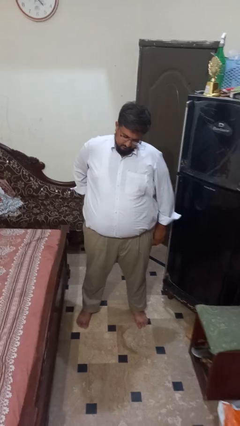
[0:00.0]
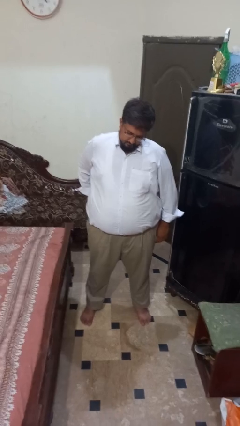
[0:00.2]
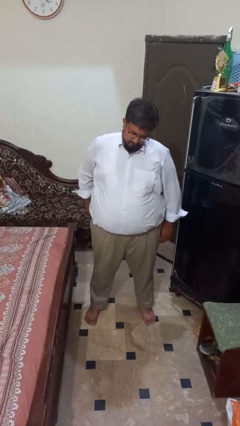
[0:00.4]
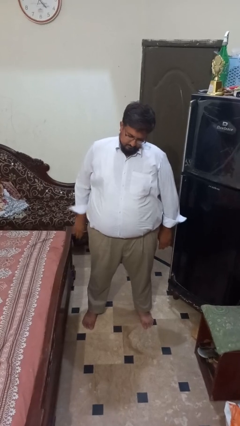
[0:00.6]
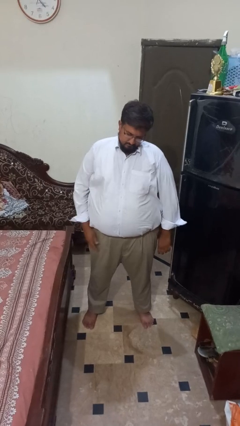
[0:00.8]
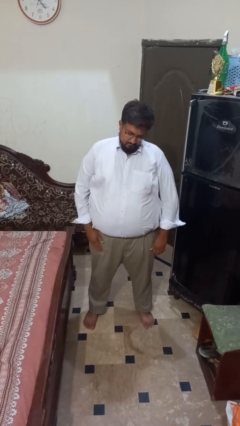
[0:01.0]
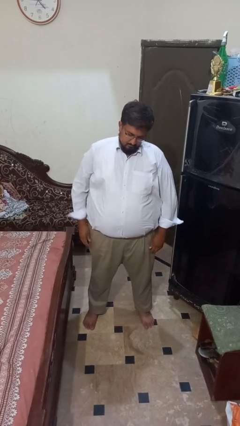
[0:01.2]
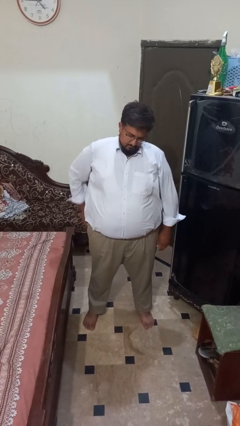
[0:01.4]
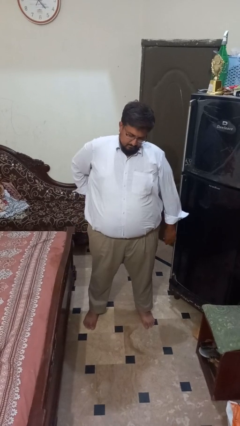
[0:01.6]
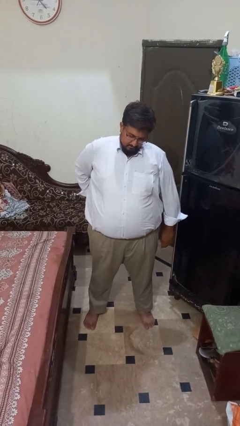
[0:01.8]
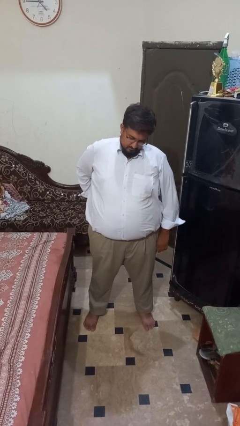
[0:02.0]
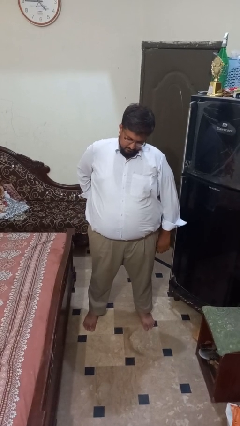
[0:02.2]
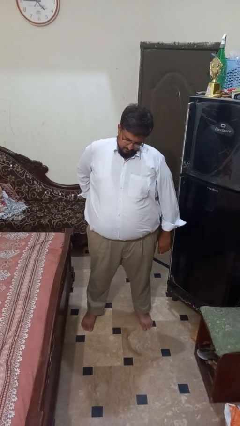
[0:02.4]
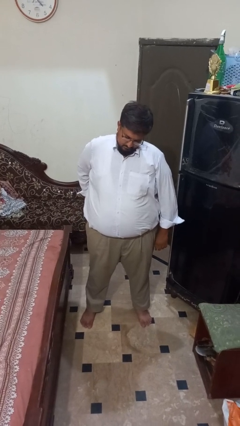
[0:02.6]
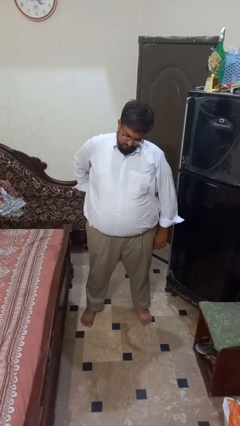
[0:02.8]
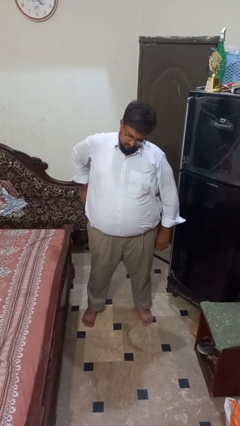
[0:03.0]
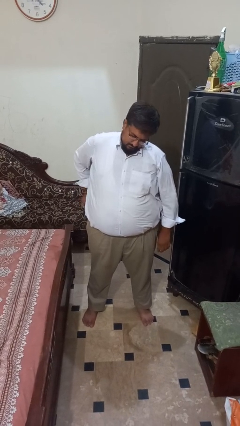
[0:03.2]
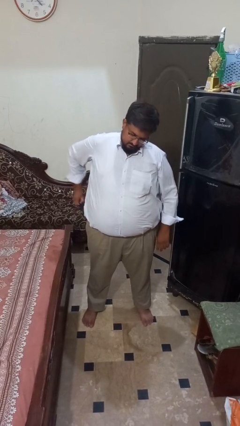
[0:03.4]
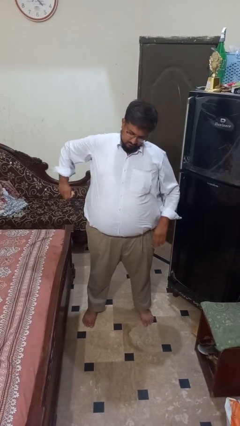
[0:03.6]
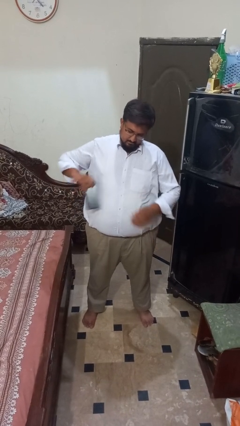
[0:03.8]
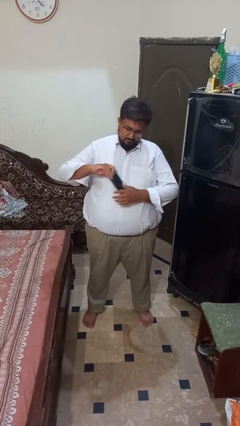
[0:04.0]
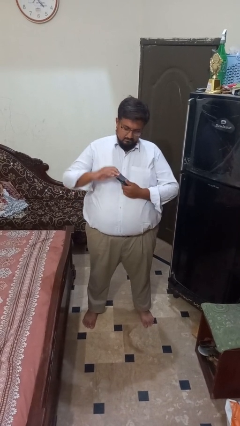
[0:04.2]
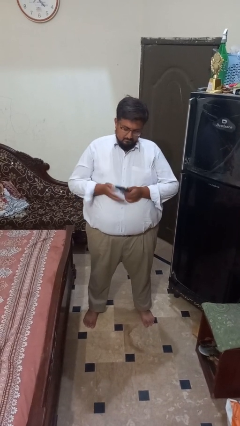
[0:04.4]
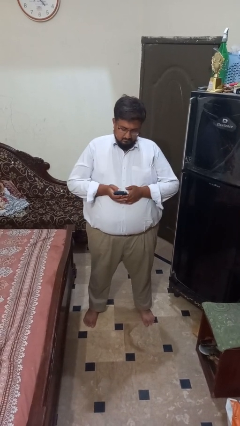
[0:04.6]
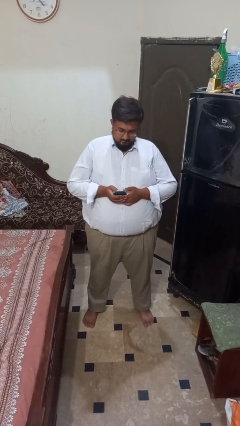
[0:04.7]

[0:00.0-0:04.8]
person takes phone from pocket

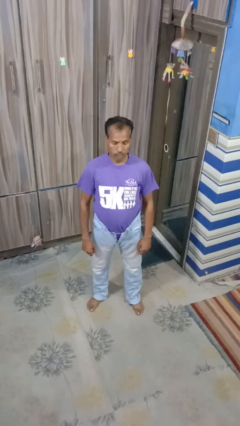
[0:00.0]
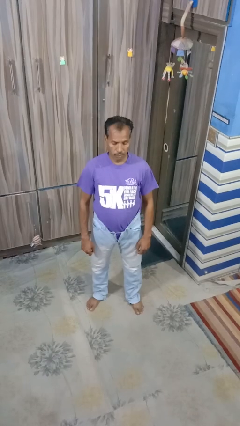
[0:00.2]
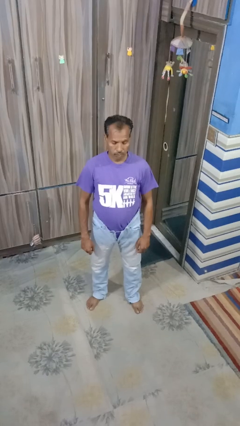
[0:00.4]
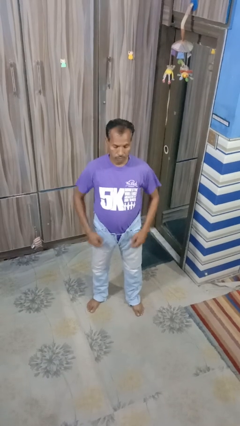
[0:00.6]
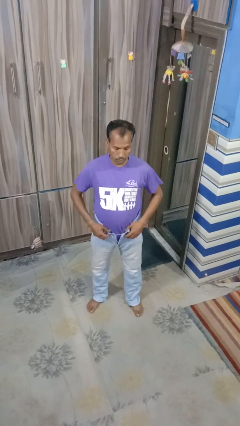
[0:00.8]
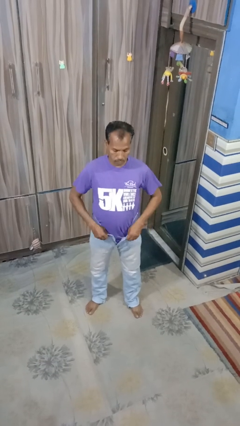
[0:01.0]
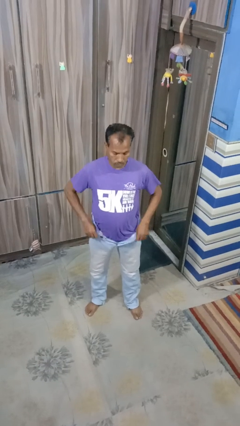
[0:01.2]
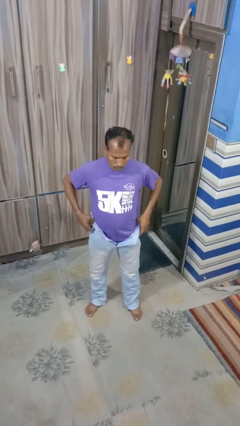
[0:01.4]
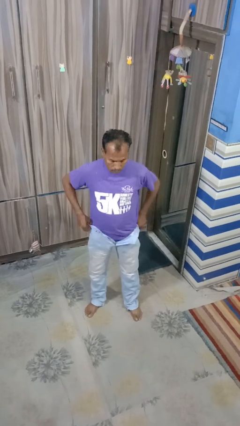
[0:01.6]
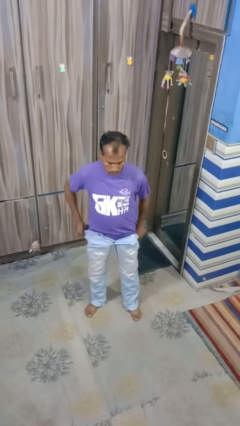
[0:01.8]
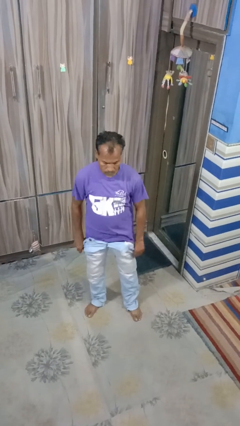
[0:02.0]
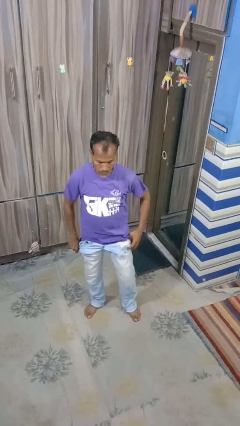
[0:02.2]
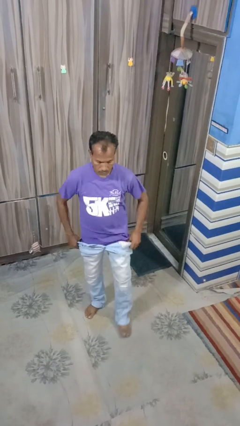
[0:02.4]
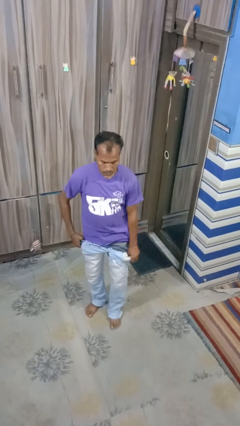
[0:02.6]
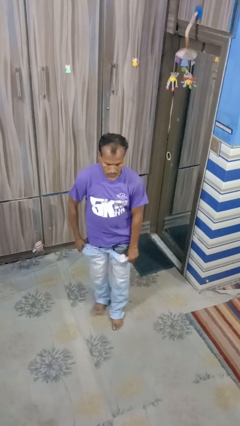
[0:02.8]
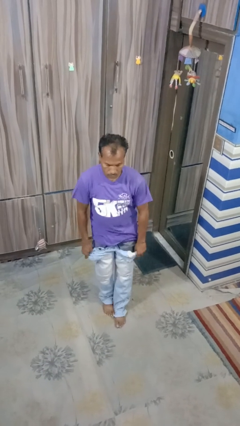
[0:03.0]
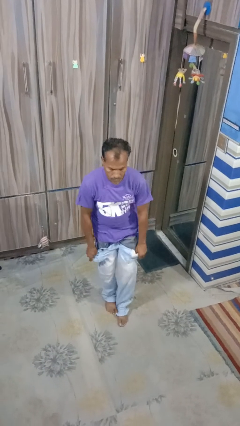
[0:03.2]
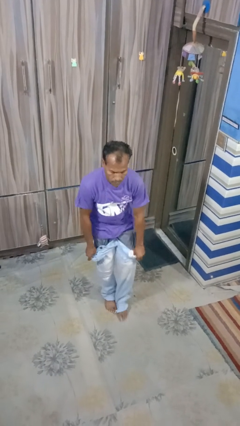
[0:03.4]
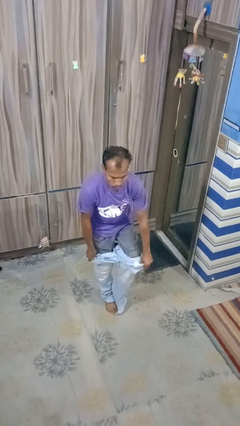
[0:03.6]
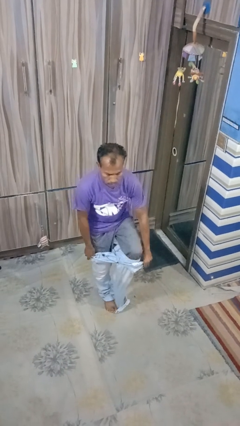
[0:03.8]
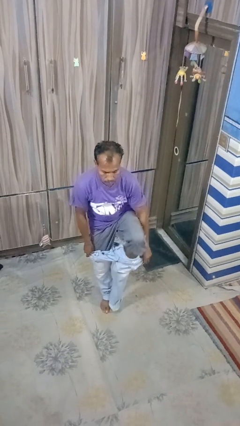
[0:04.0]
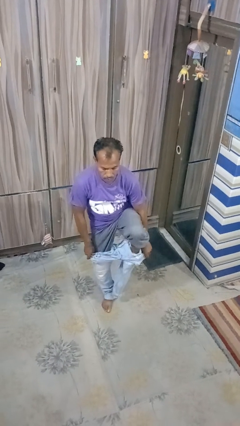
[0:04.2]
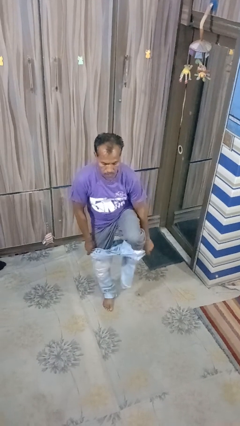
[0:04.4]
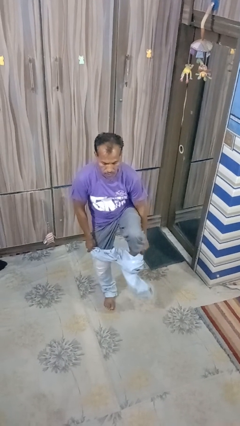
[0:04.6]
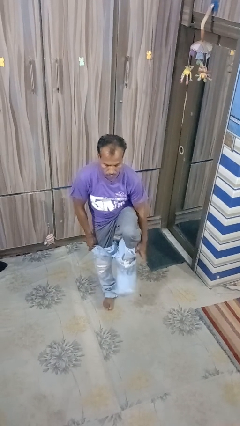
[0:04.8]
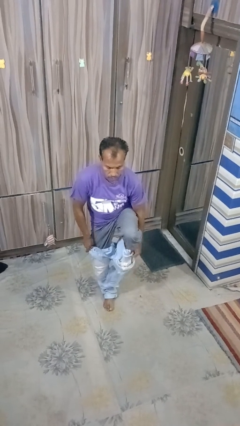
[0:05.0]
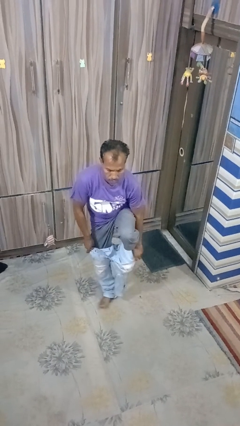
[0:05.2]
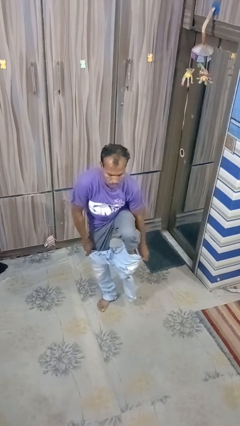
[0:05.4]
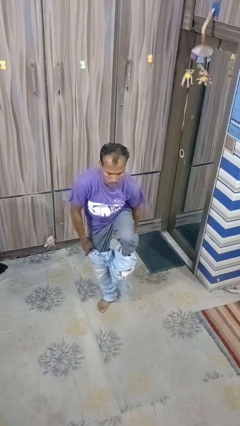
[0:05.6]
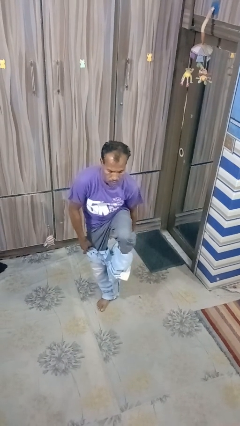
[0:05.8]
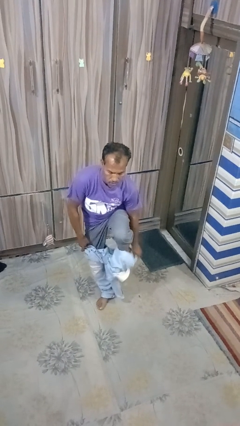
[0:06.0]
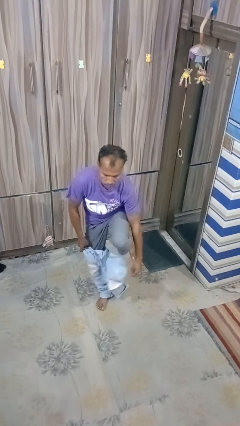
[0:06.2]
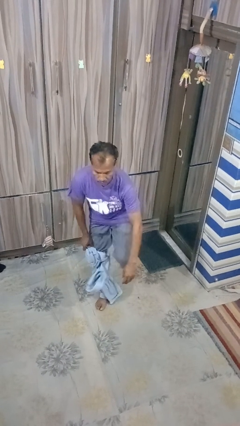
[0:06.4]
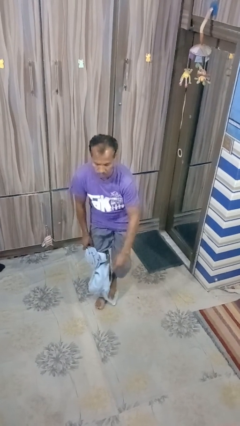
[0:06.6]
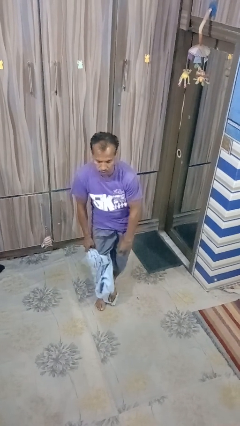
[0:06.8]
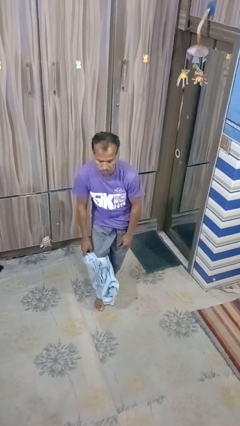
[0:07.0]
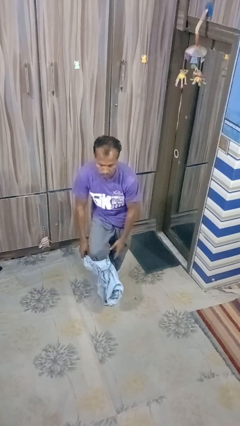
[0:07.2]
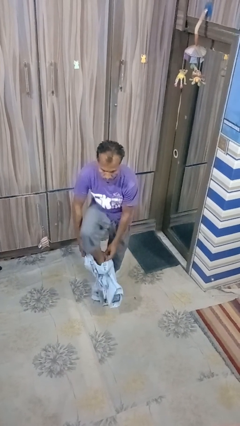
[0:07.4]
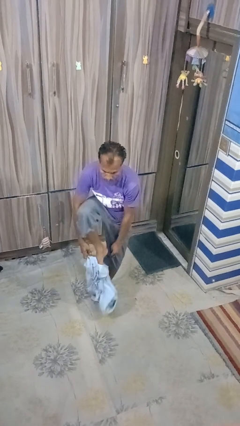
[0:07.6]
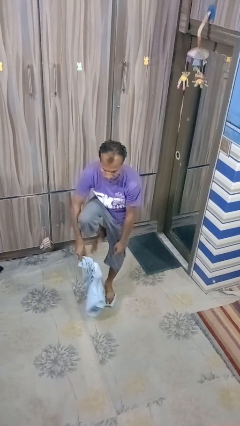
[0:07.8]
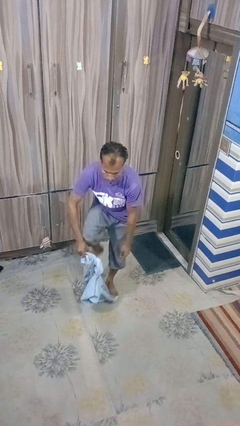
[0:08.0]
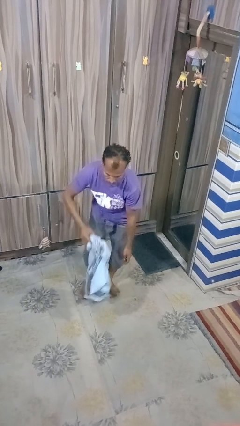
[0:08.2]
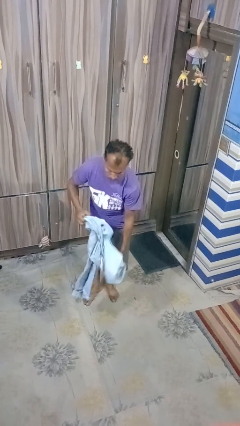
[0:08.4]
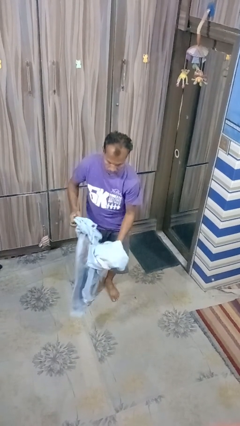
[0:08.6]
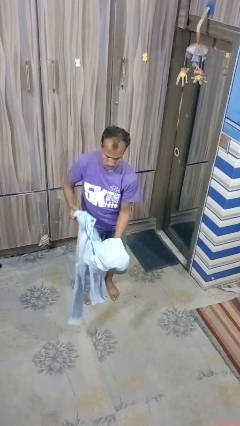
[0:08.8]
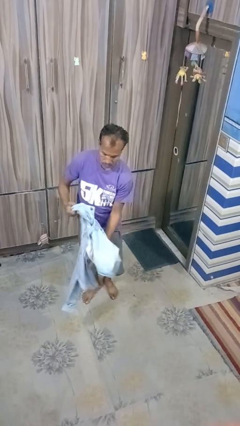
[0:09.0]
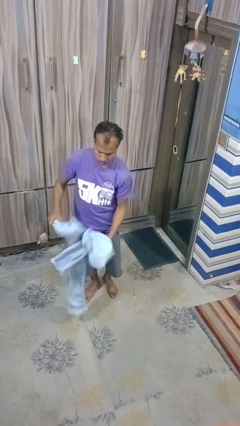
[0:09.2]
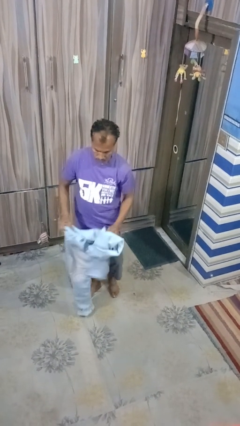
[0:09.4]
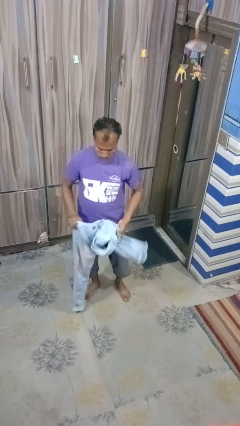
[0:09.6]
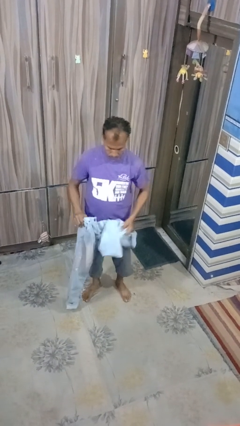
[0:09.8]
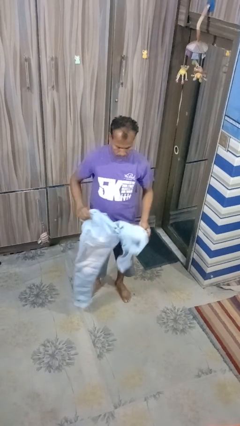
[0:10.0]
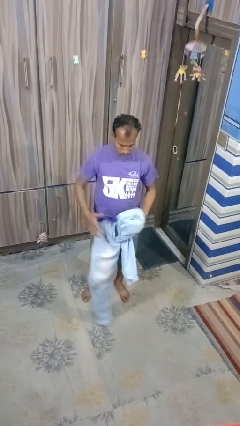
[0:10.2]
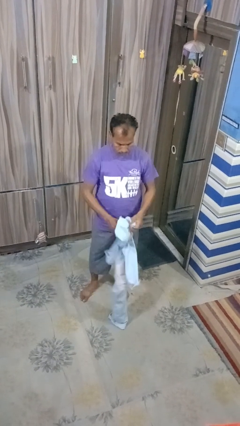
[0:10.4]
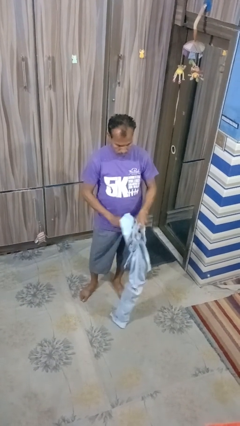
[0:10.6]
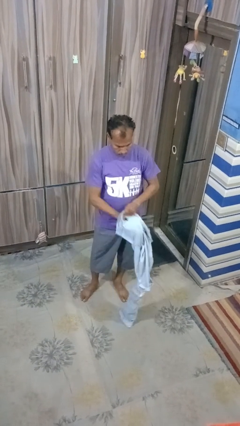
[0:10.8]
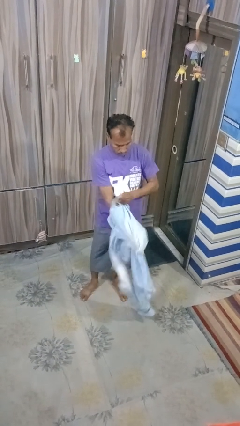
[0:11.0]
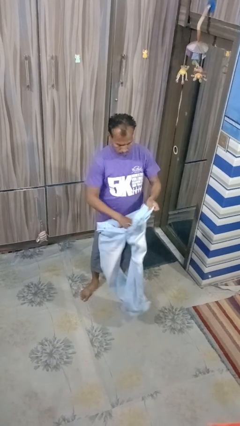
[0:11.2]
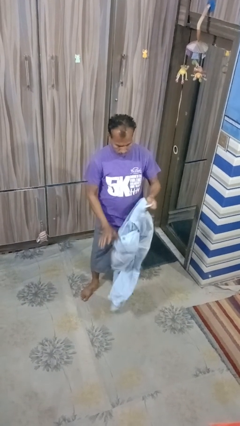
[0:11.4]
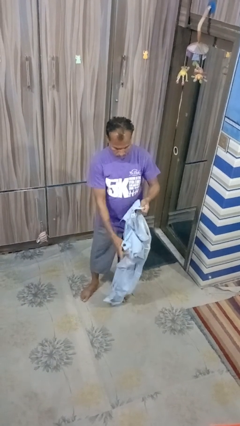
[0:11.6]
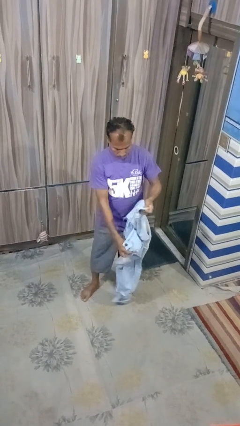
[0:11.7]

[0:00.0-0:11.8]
person takes off pants

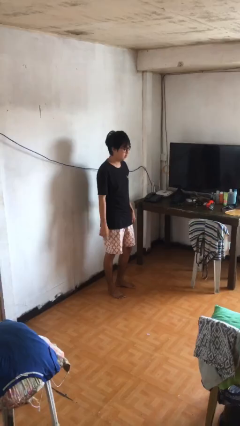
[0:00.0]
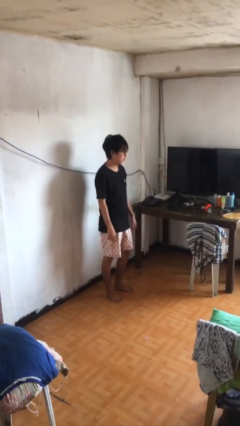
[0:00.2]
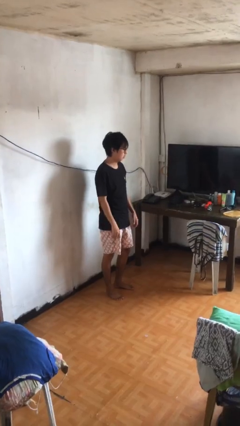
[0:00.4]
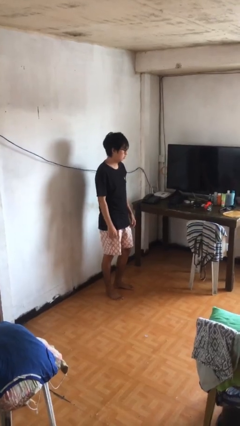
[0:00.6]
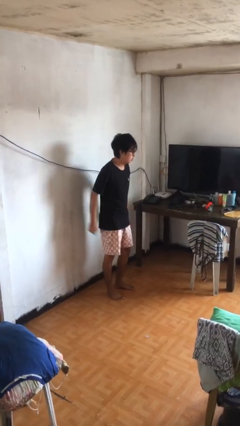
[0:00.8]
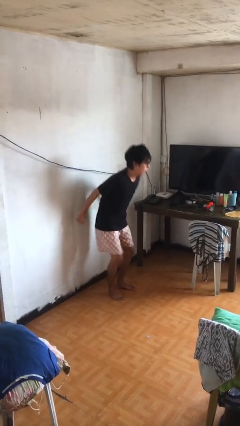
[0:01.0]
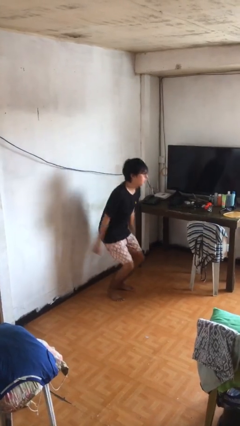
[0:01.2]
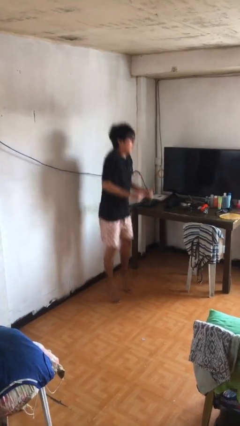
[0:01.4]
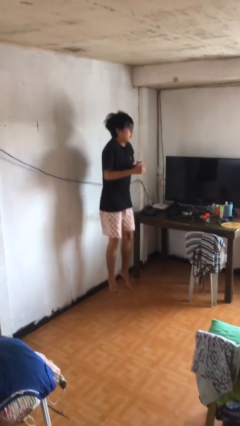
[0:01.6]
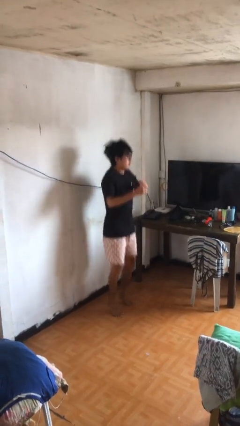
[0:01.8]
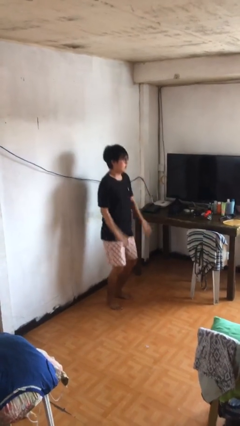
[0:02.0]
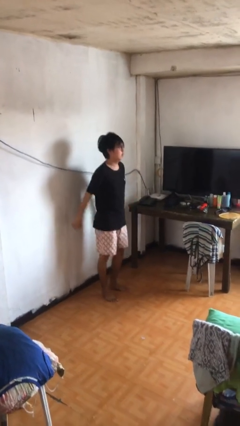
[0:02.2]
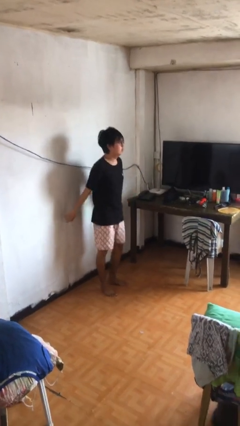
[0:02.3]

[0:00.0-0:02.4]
person jumps
